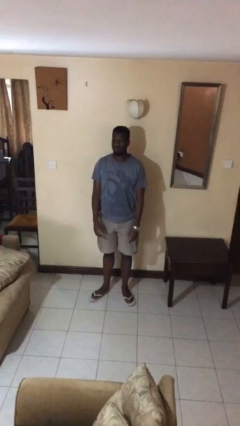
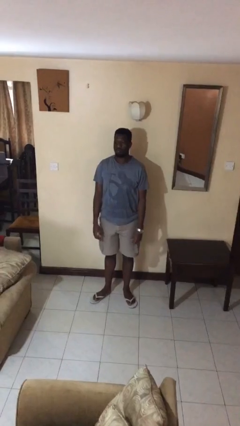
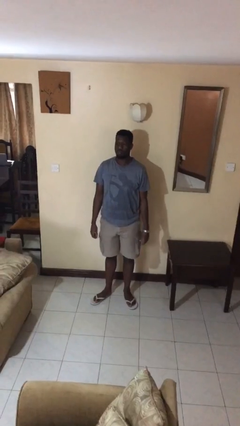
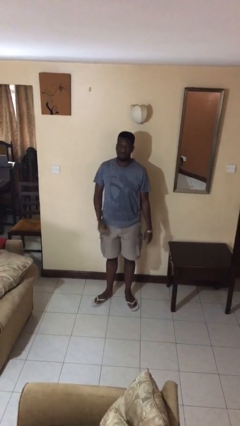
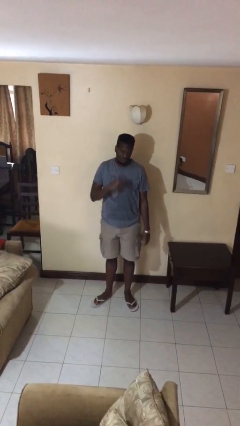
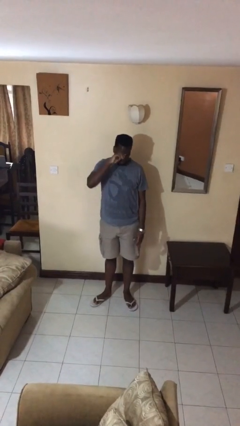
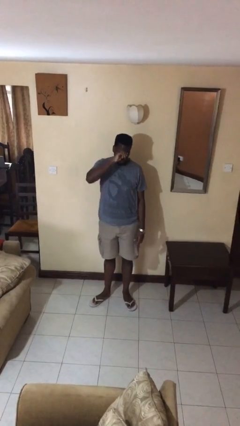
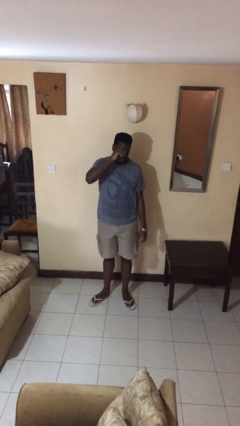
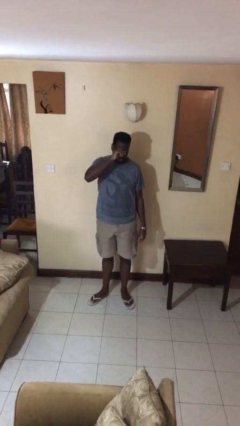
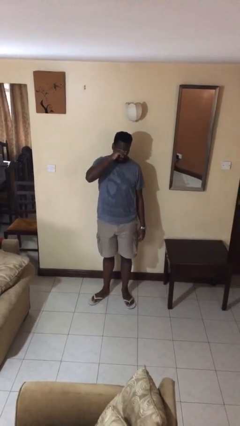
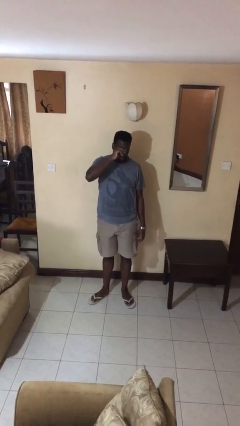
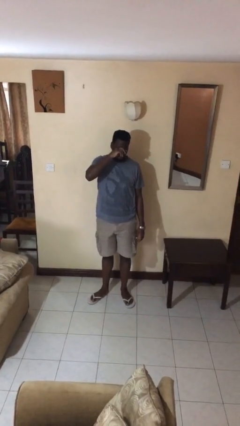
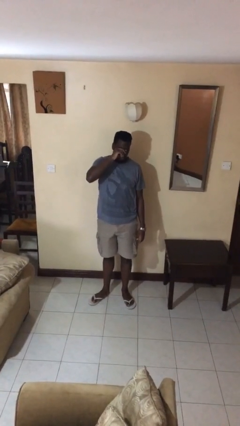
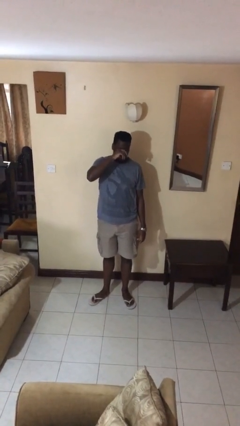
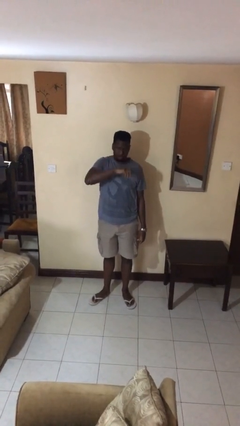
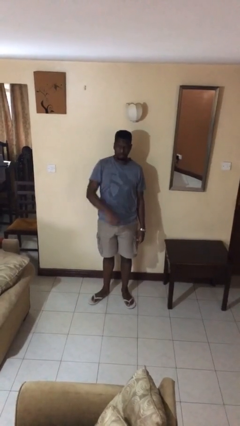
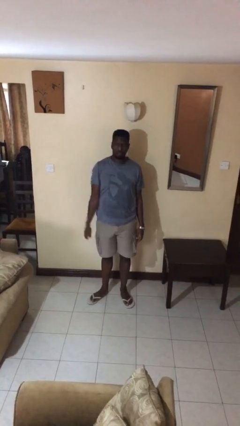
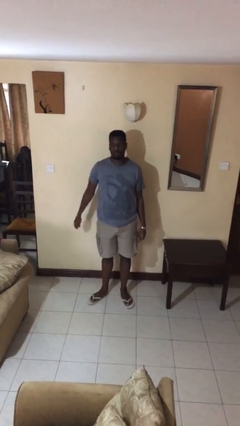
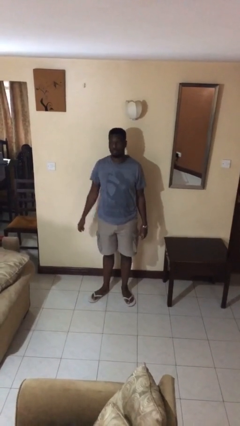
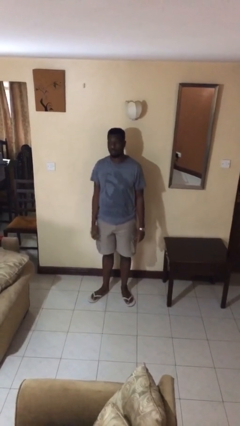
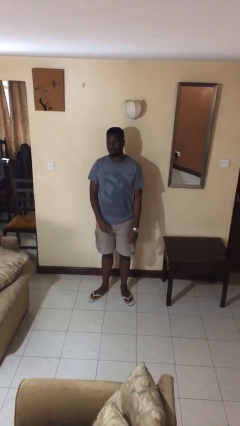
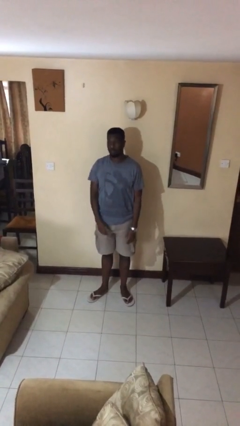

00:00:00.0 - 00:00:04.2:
person rubs eyes

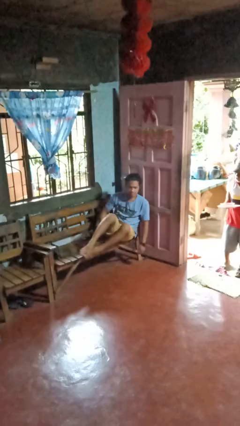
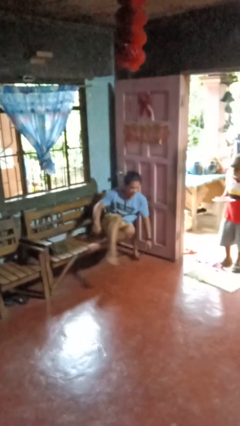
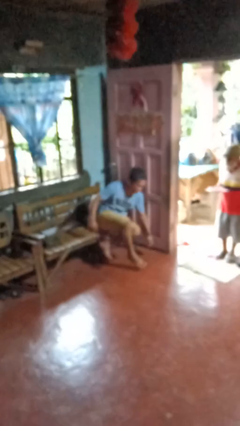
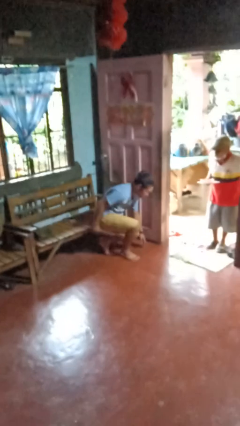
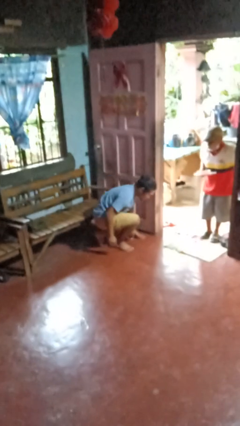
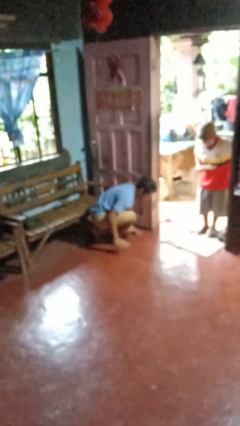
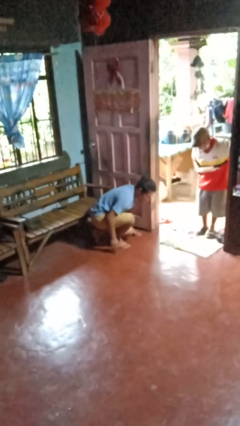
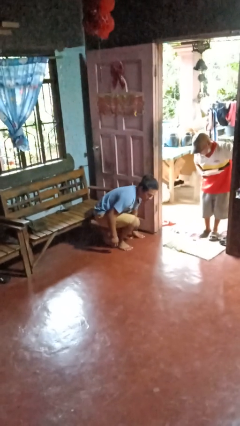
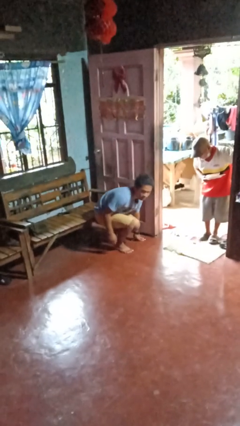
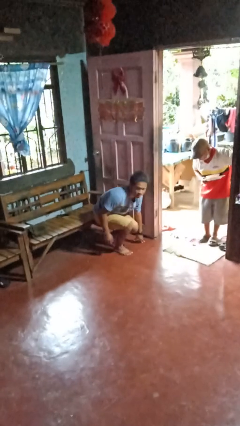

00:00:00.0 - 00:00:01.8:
person falls from chair

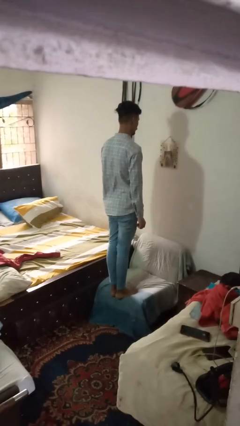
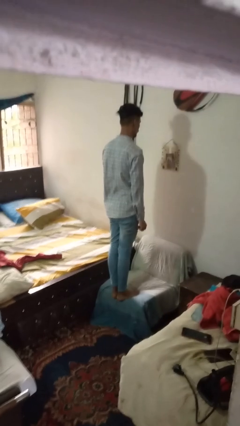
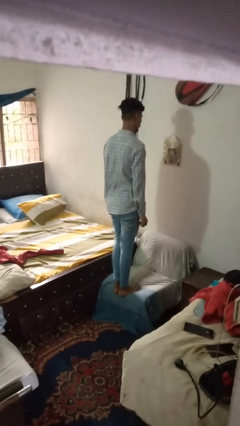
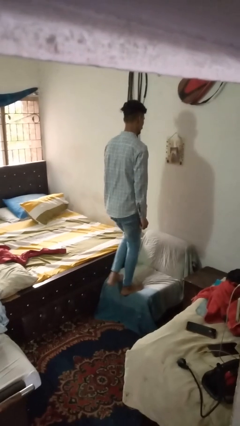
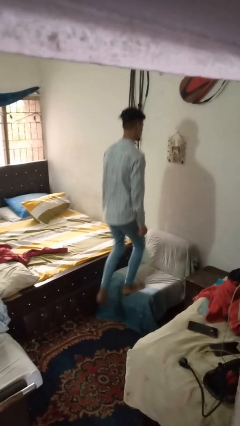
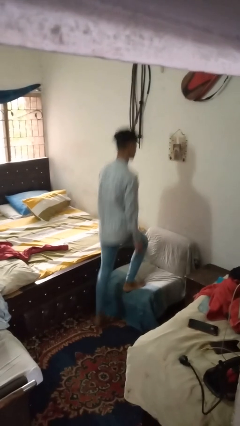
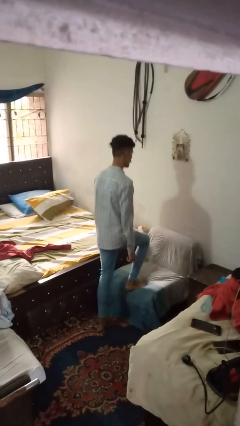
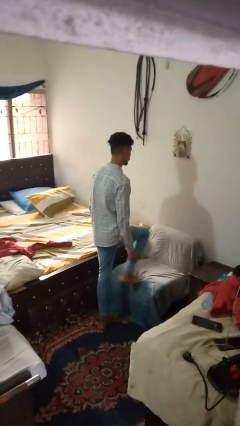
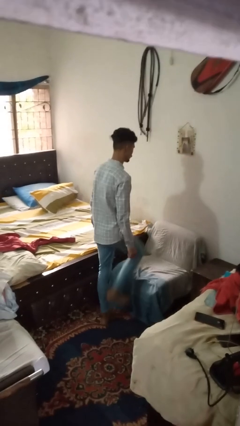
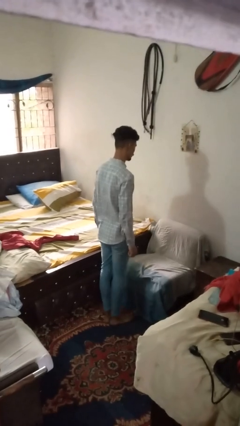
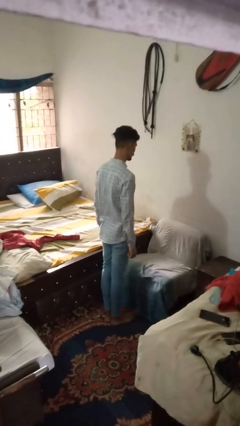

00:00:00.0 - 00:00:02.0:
person climbs off couch

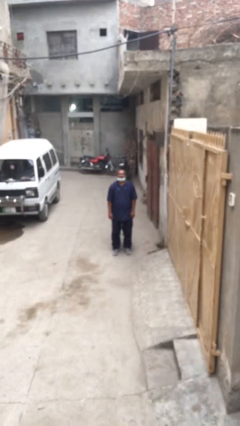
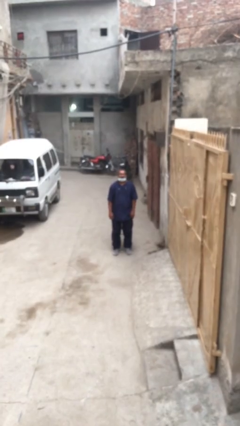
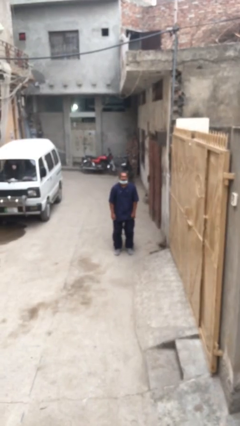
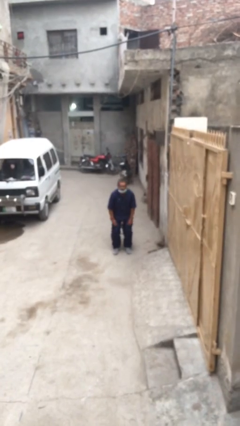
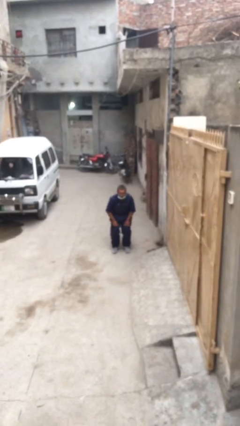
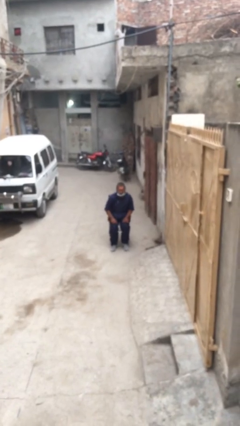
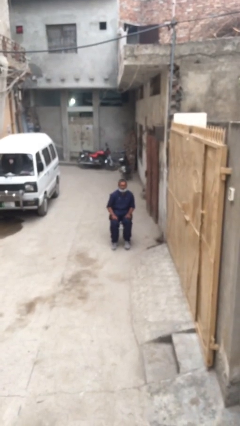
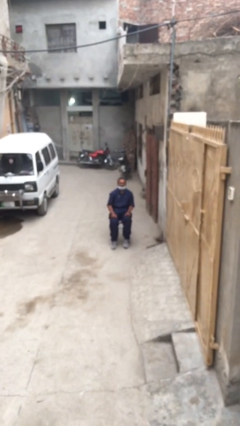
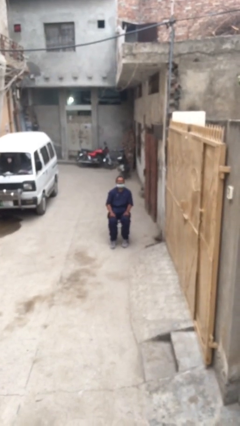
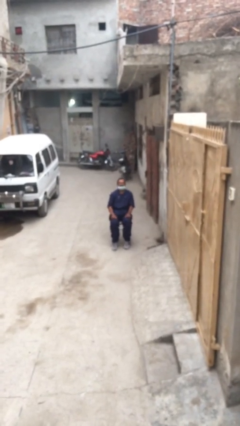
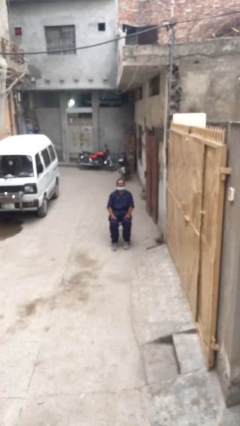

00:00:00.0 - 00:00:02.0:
person sits down

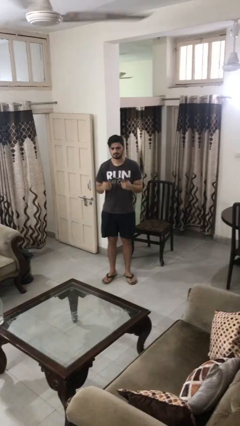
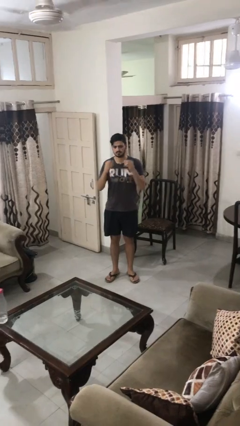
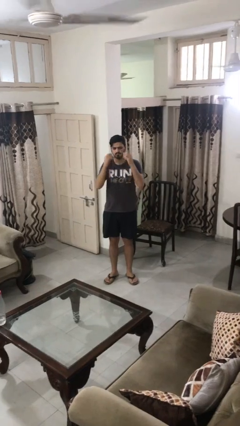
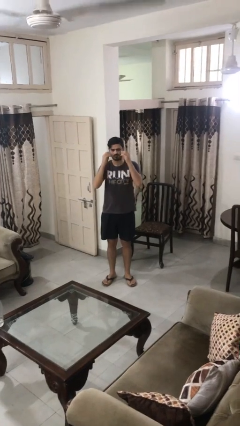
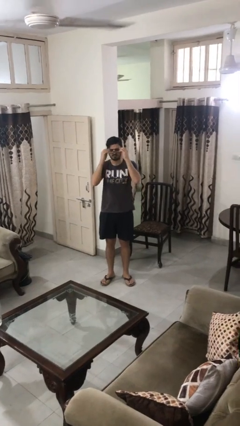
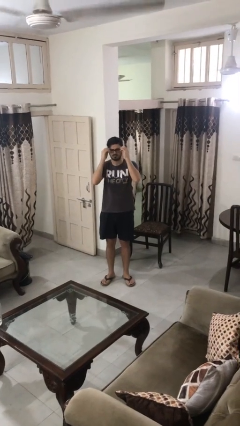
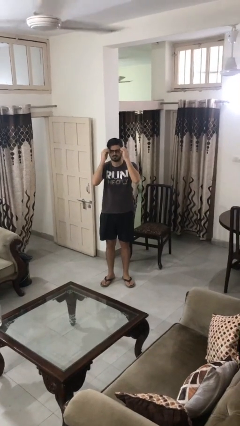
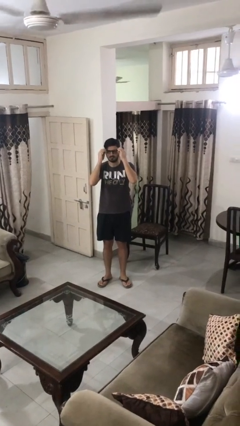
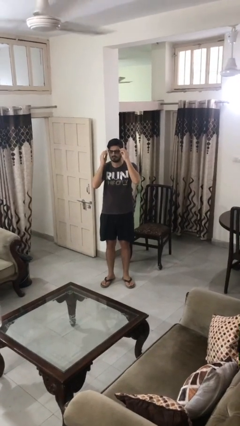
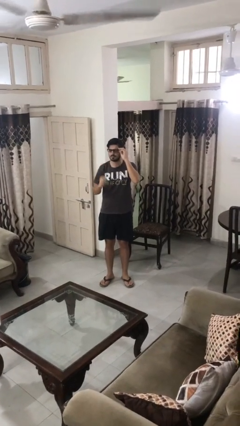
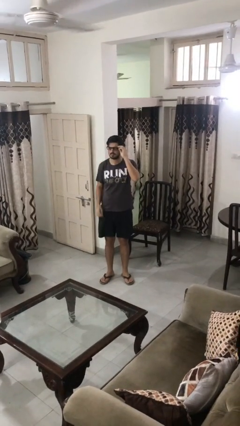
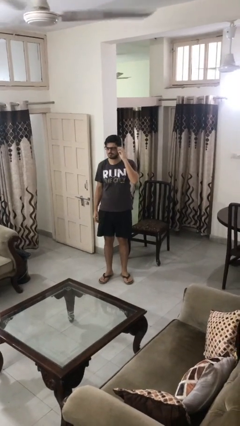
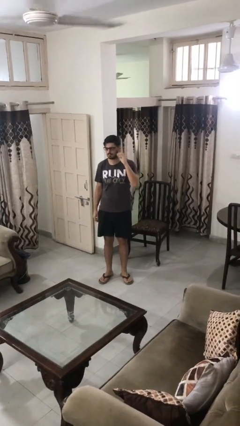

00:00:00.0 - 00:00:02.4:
person puts on glasses

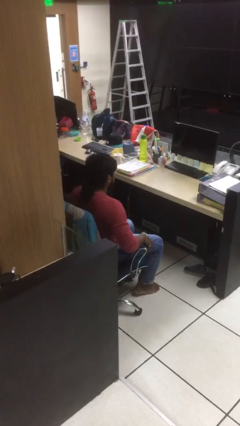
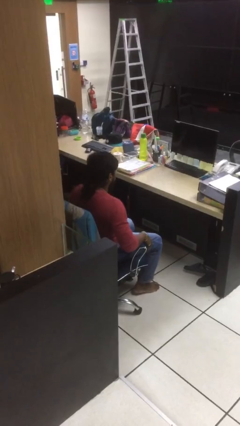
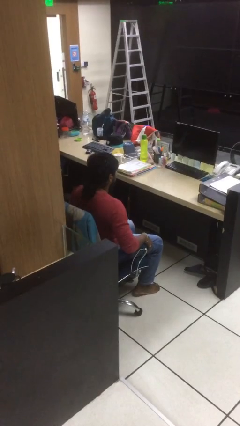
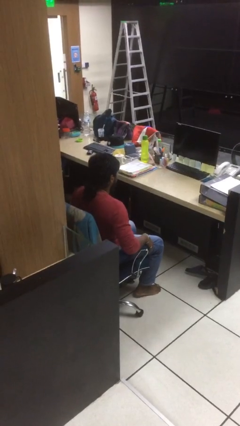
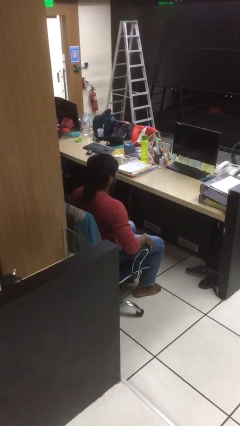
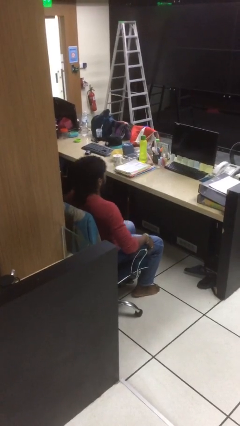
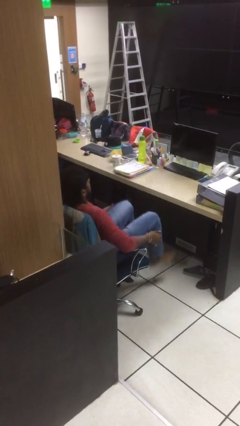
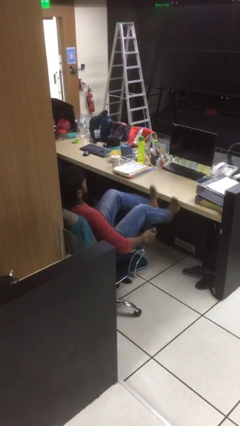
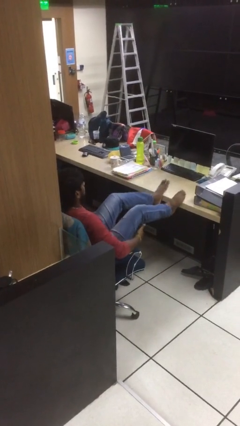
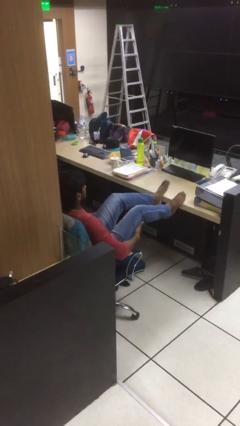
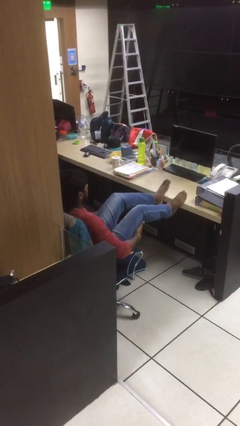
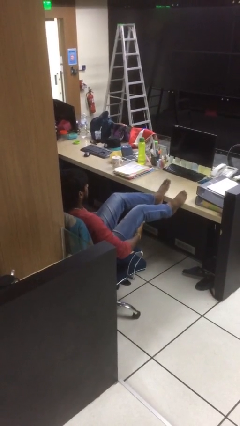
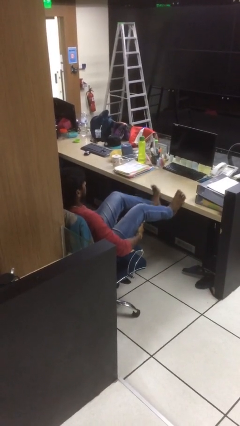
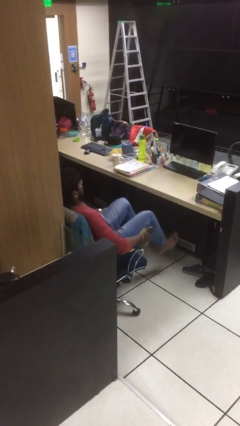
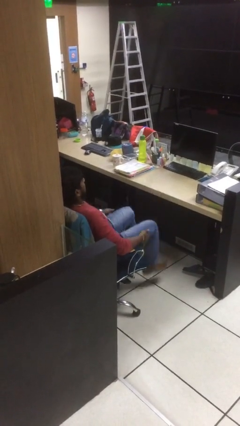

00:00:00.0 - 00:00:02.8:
person puts feet up

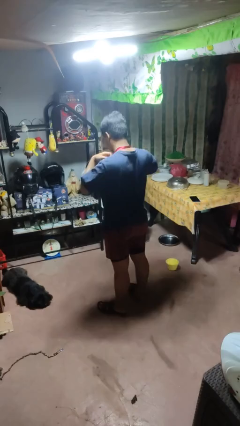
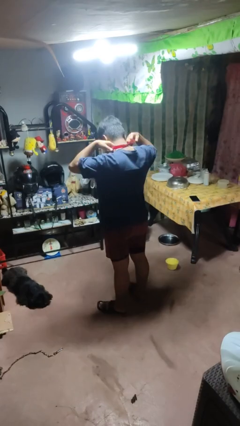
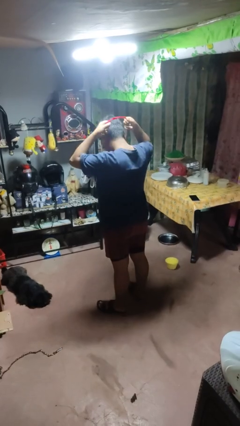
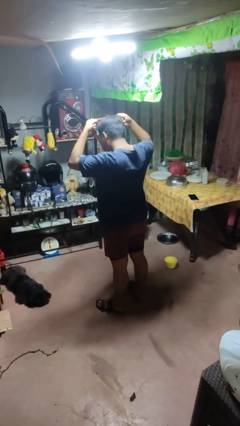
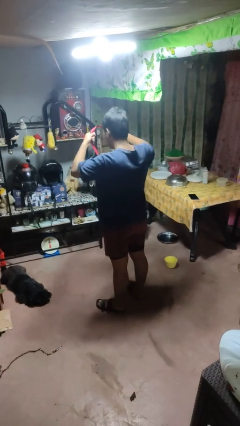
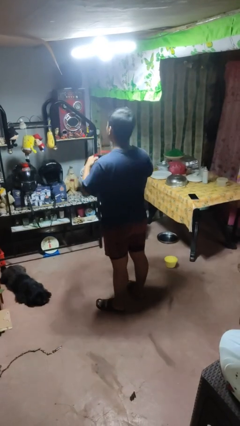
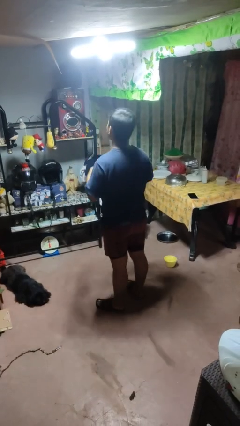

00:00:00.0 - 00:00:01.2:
person takes off necklace

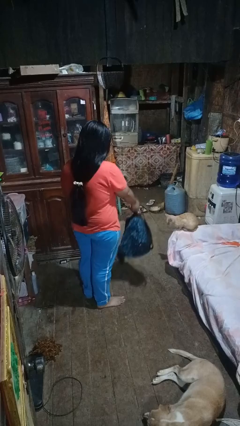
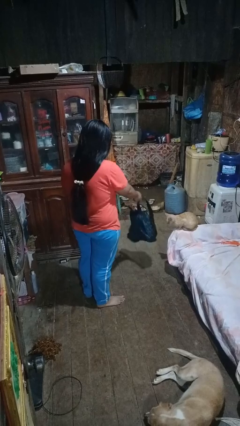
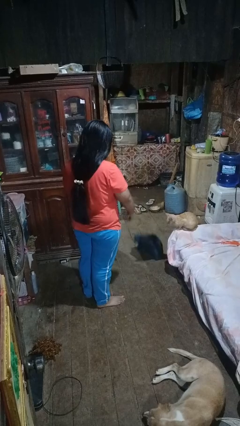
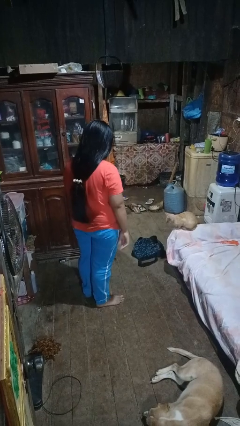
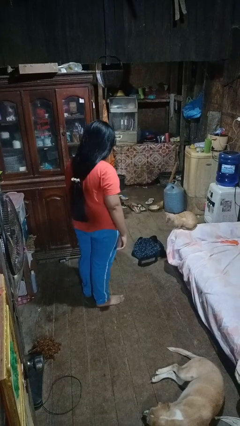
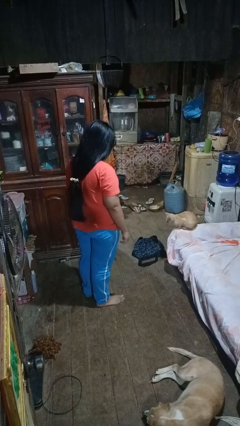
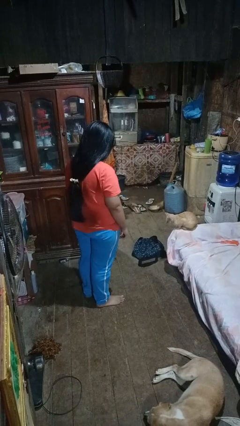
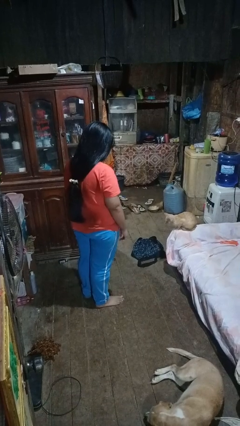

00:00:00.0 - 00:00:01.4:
person throws object to ground
